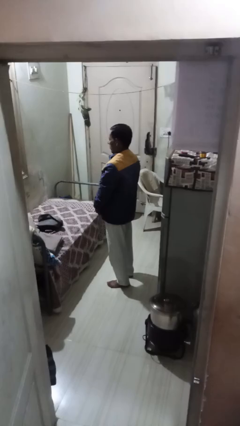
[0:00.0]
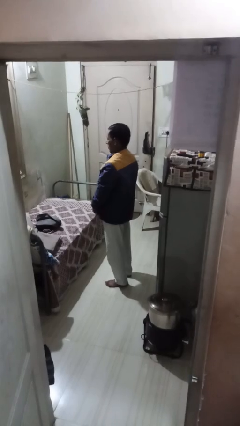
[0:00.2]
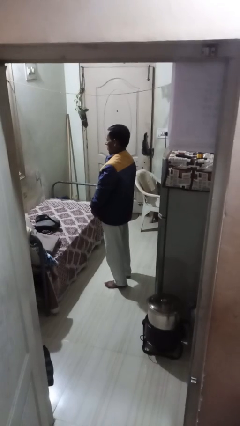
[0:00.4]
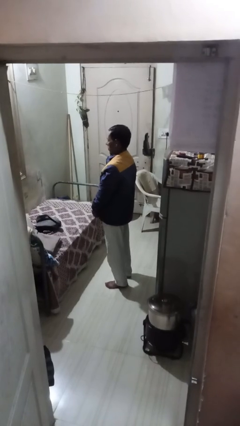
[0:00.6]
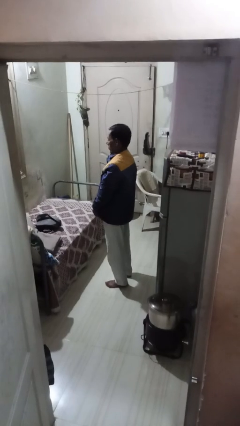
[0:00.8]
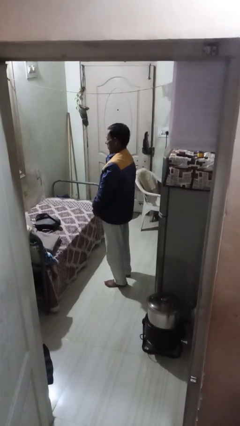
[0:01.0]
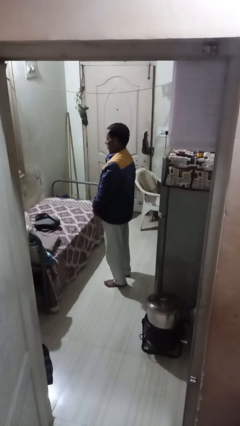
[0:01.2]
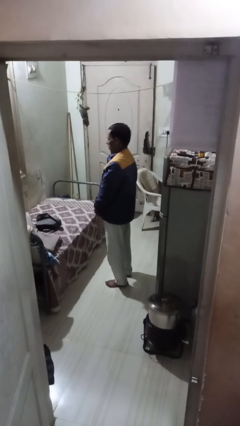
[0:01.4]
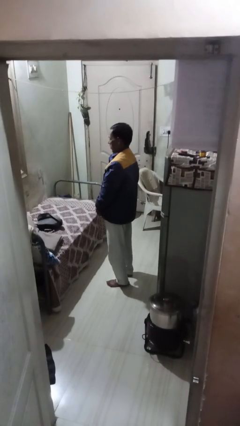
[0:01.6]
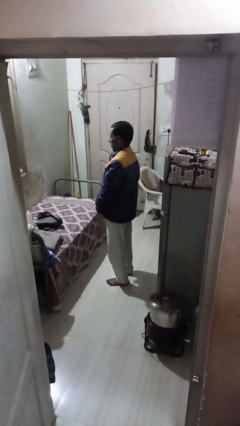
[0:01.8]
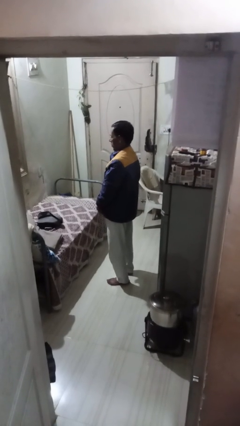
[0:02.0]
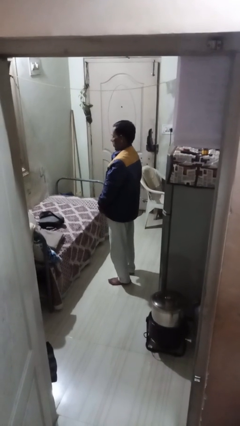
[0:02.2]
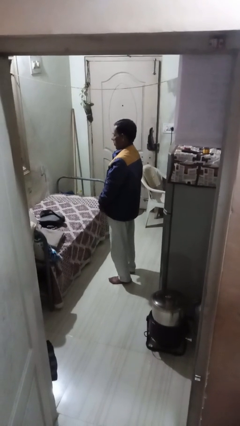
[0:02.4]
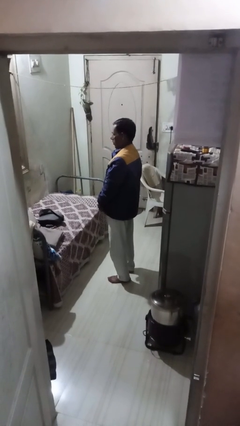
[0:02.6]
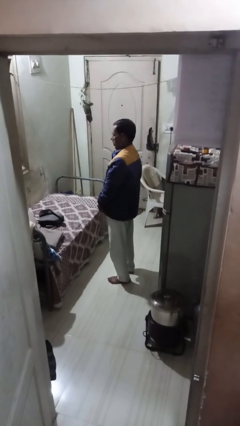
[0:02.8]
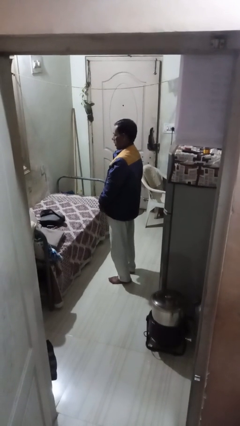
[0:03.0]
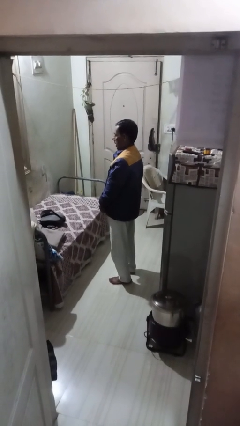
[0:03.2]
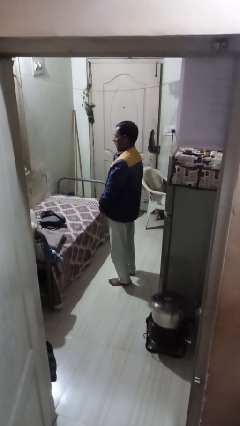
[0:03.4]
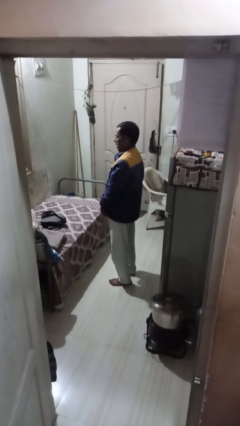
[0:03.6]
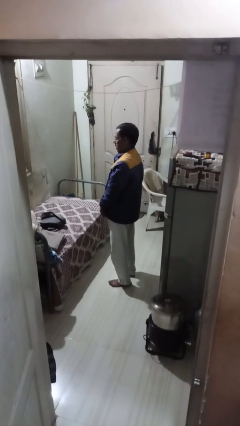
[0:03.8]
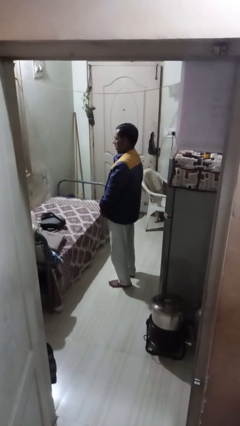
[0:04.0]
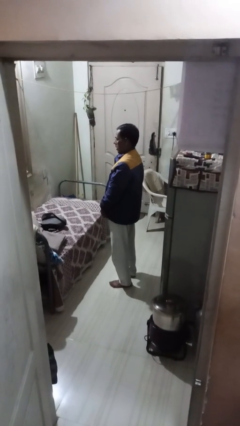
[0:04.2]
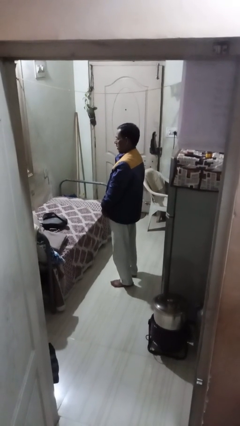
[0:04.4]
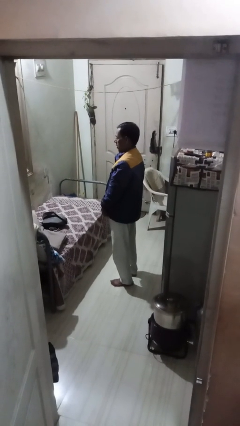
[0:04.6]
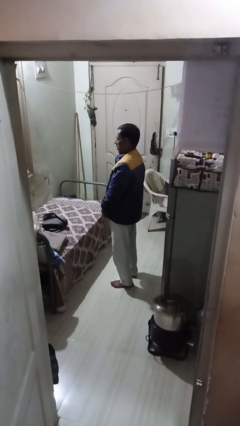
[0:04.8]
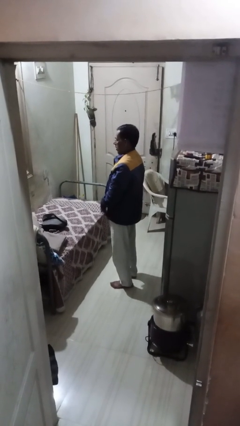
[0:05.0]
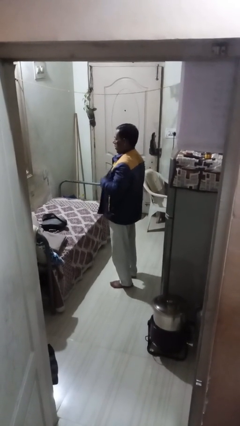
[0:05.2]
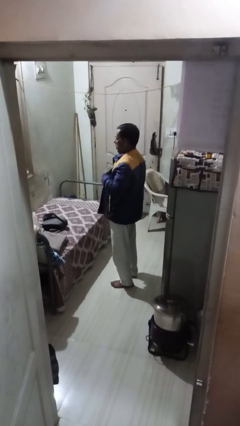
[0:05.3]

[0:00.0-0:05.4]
person unzips jacket

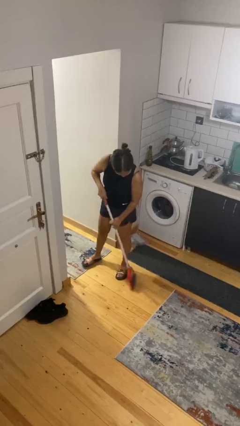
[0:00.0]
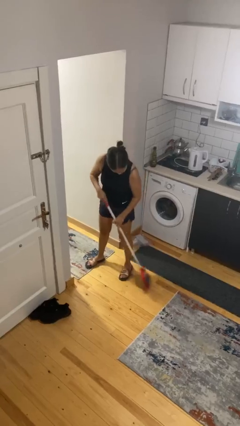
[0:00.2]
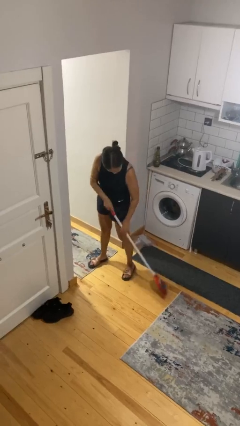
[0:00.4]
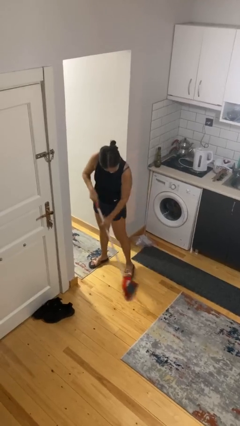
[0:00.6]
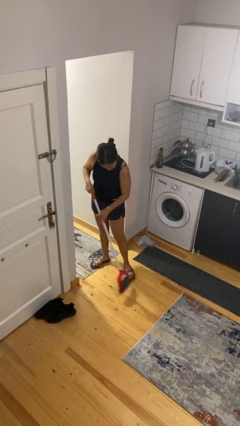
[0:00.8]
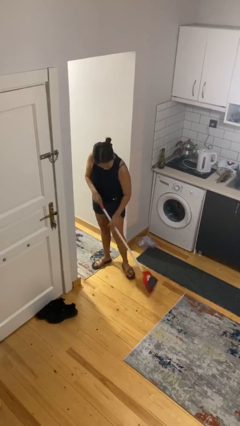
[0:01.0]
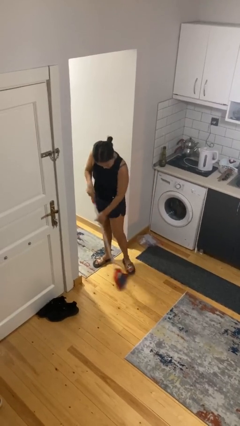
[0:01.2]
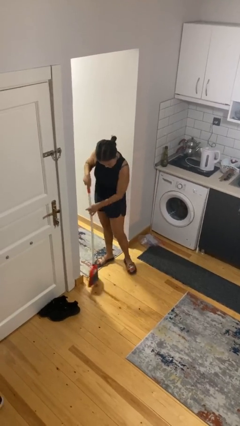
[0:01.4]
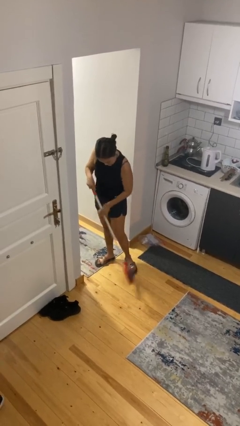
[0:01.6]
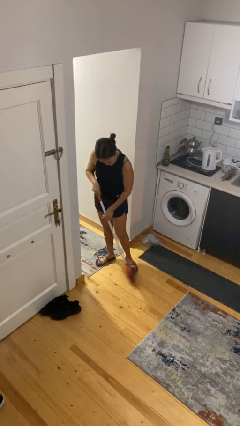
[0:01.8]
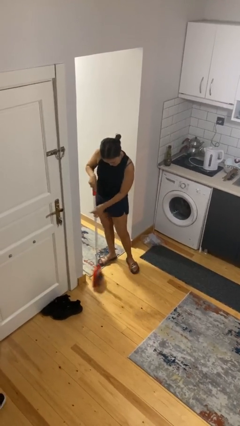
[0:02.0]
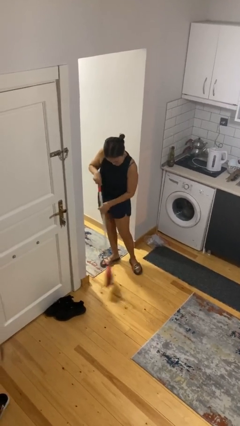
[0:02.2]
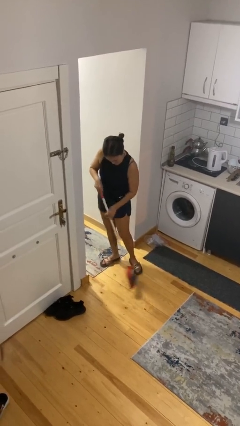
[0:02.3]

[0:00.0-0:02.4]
person sweeps floor

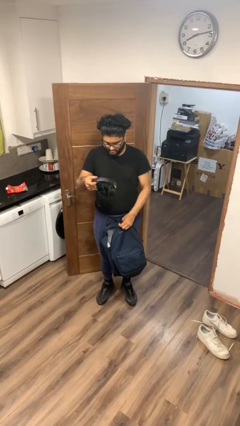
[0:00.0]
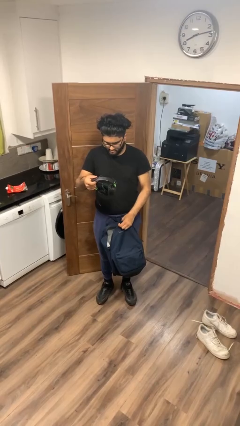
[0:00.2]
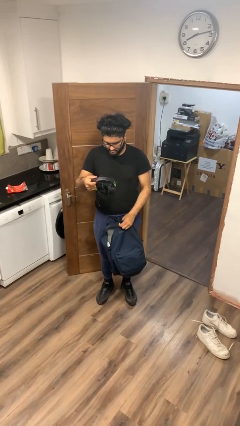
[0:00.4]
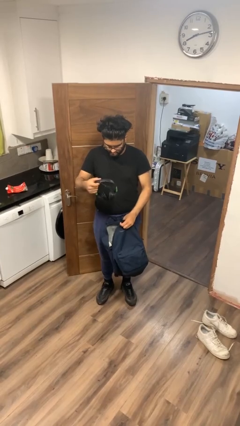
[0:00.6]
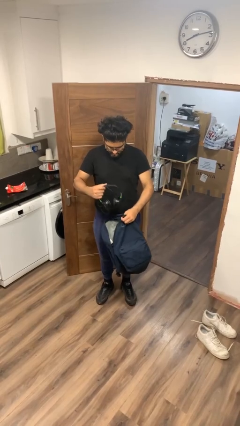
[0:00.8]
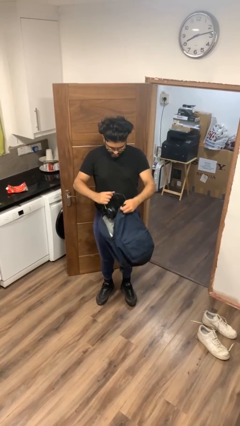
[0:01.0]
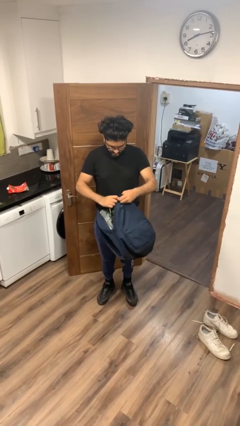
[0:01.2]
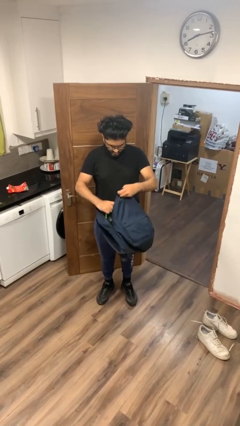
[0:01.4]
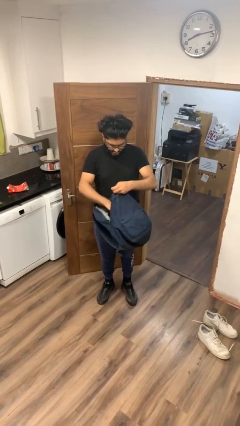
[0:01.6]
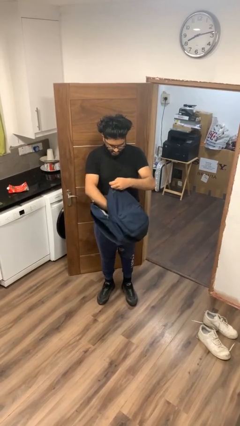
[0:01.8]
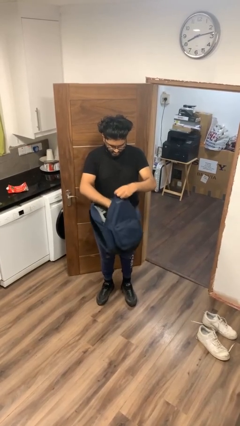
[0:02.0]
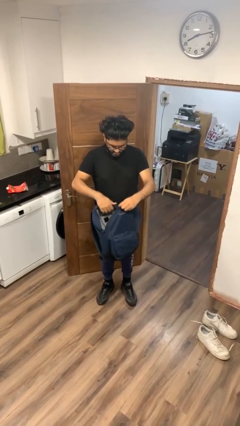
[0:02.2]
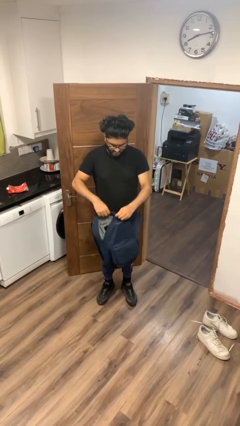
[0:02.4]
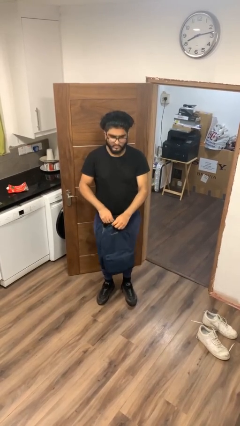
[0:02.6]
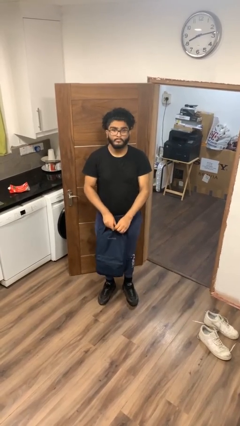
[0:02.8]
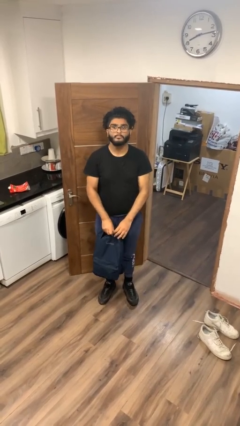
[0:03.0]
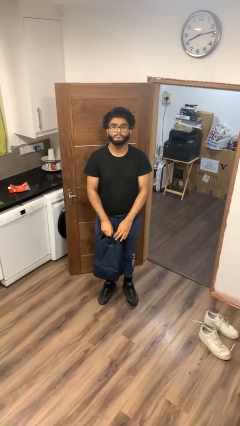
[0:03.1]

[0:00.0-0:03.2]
person puts object into backpack

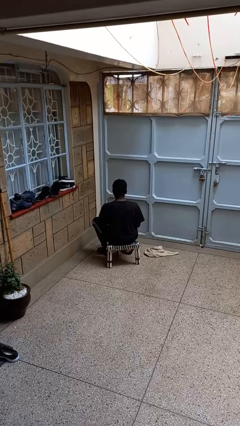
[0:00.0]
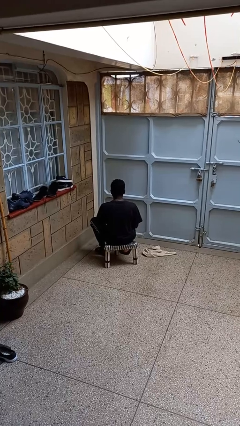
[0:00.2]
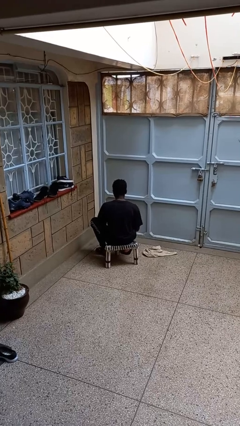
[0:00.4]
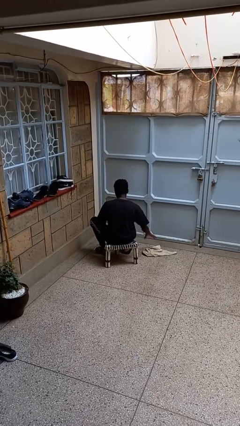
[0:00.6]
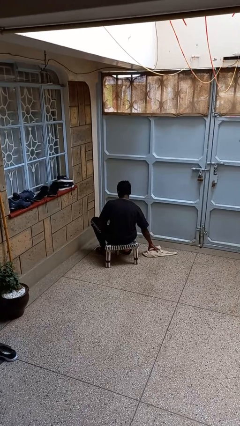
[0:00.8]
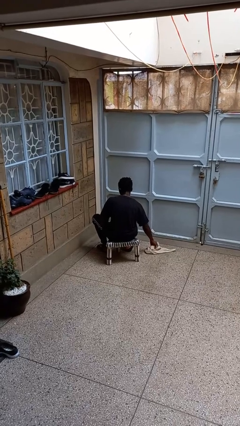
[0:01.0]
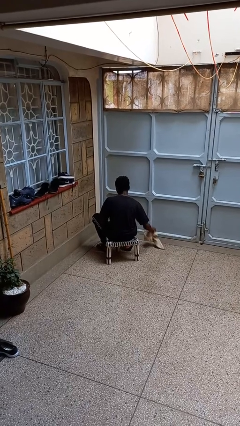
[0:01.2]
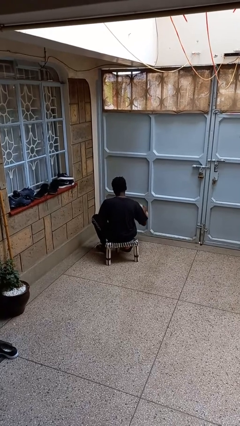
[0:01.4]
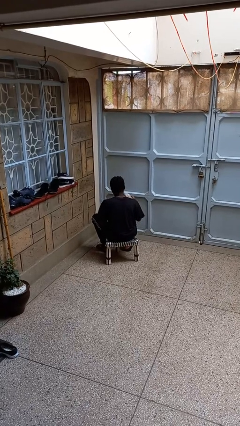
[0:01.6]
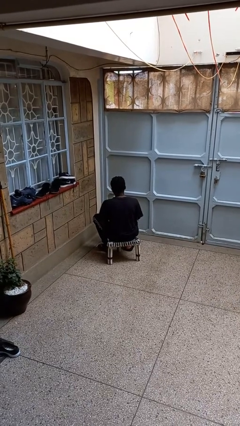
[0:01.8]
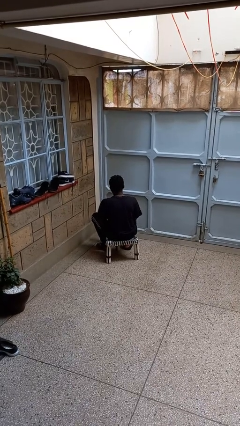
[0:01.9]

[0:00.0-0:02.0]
person picks up object from floor

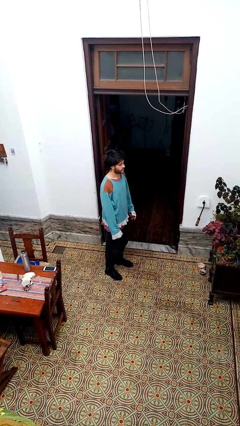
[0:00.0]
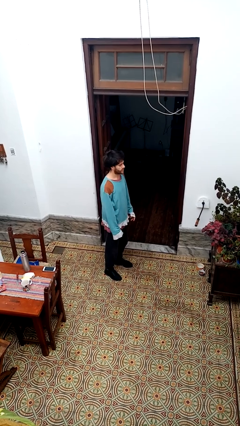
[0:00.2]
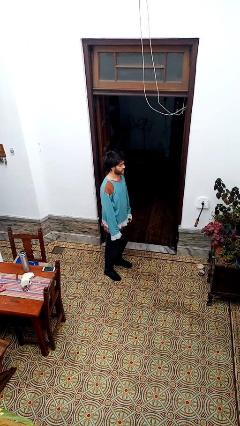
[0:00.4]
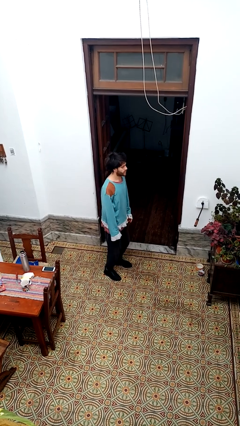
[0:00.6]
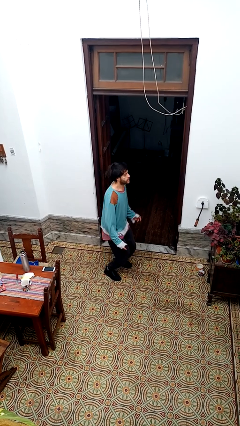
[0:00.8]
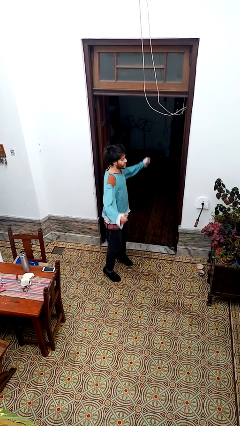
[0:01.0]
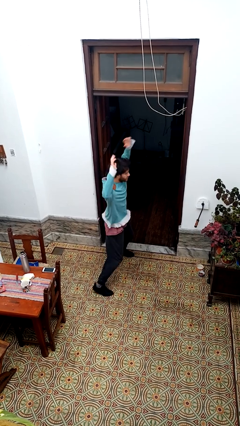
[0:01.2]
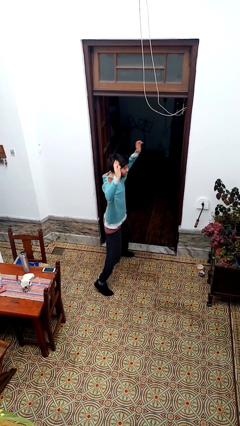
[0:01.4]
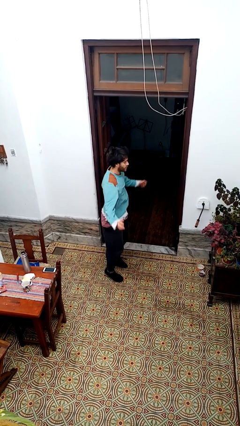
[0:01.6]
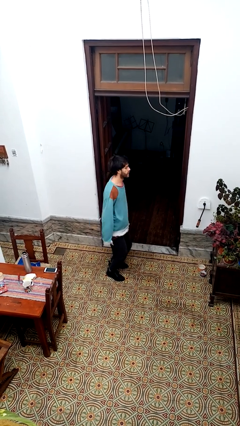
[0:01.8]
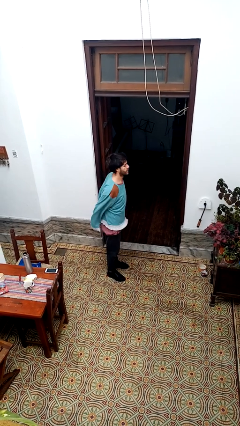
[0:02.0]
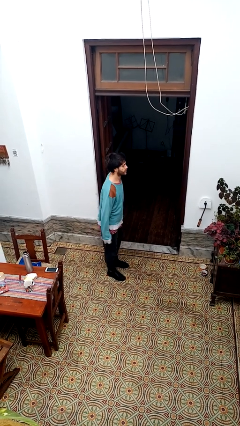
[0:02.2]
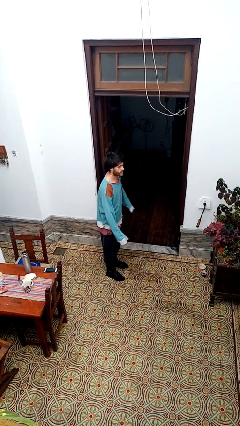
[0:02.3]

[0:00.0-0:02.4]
person exercises with jumping jacks

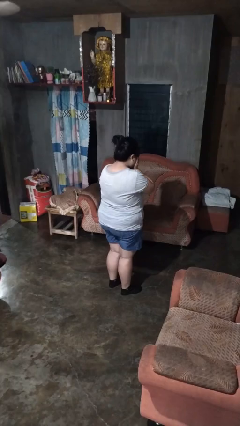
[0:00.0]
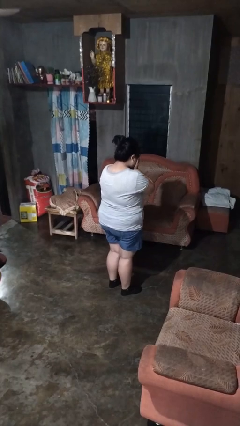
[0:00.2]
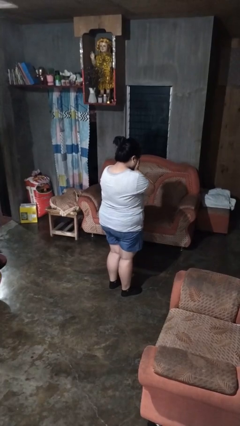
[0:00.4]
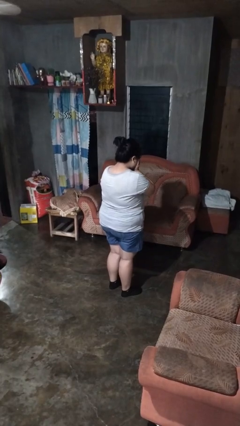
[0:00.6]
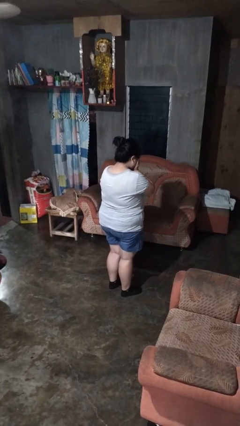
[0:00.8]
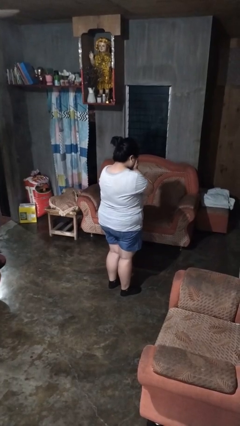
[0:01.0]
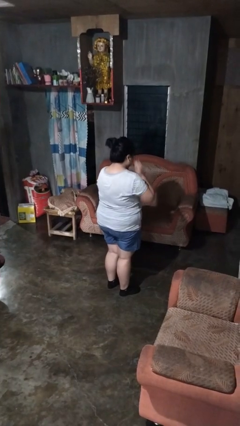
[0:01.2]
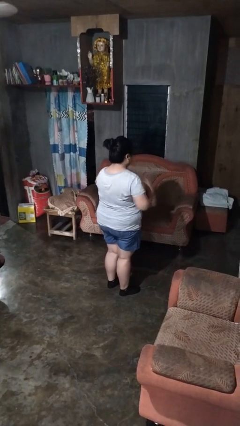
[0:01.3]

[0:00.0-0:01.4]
person covers face with hands

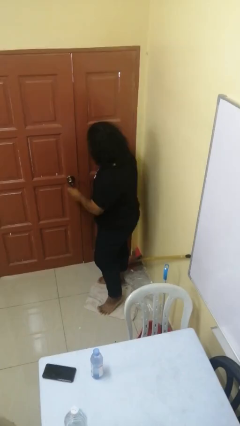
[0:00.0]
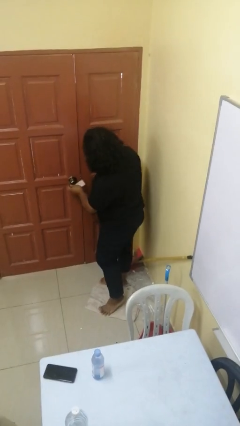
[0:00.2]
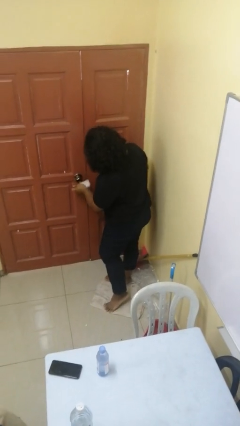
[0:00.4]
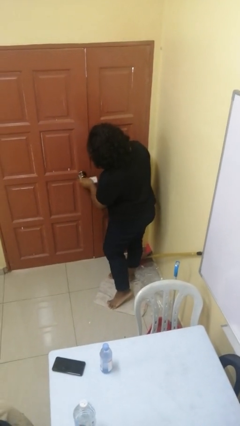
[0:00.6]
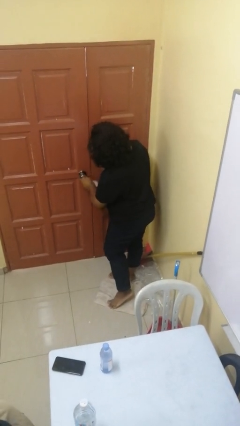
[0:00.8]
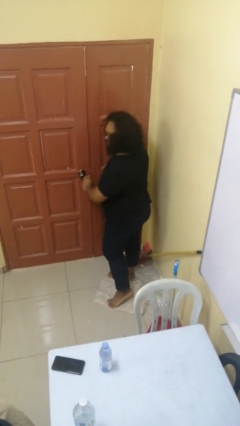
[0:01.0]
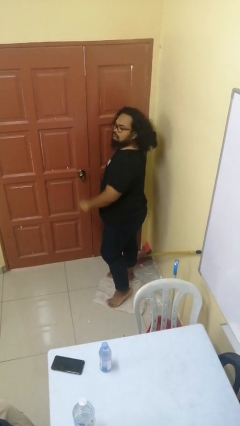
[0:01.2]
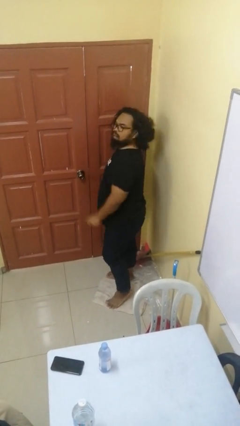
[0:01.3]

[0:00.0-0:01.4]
person locks door with keys
